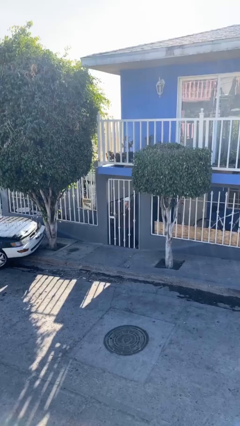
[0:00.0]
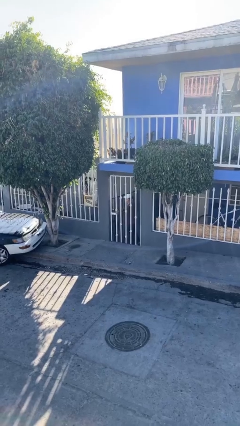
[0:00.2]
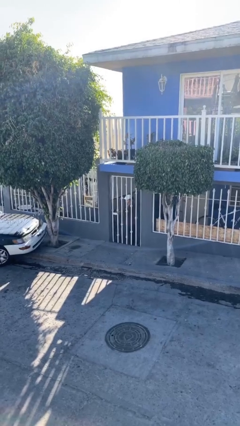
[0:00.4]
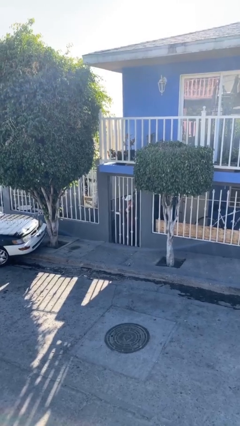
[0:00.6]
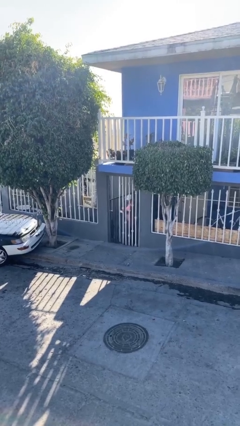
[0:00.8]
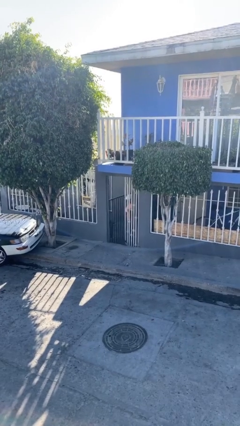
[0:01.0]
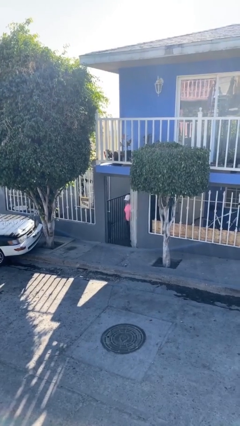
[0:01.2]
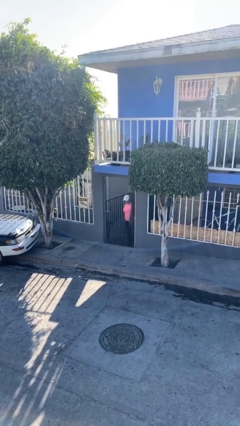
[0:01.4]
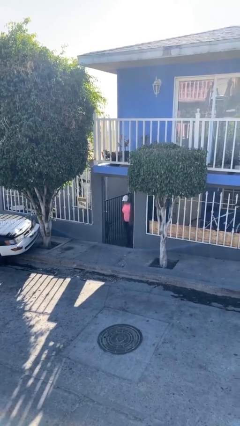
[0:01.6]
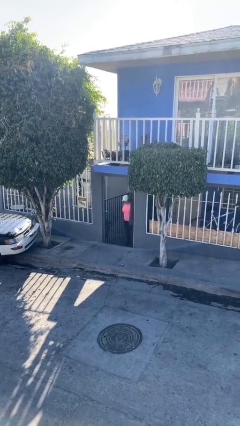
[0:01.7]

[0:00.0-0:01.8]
person opens facility door

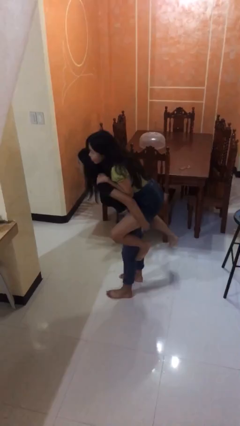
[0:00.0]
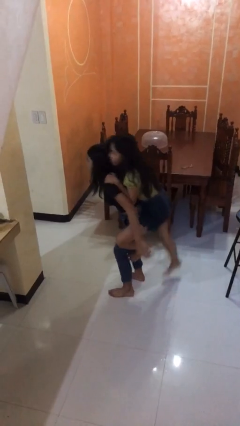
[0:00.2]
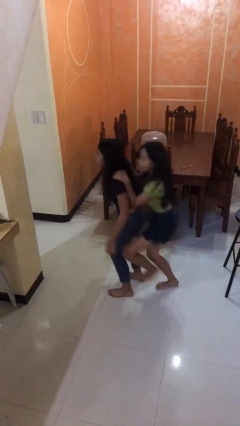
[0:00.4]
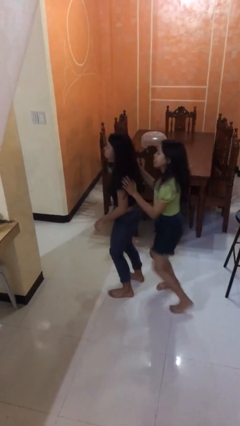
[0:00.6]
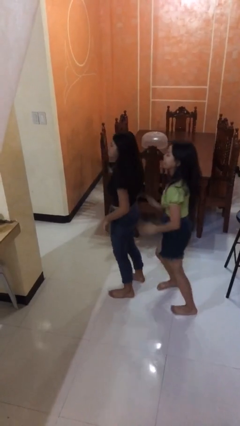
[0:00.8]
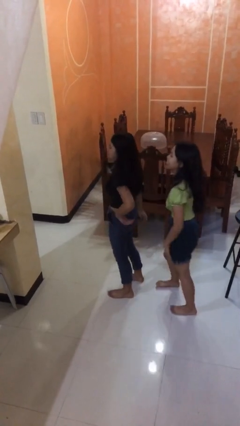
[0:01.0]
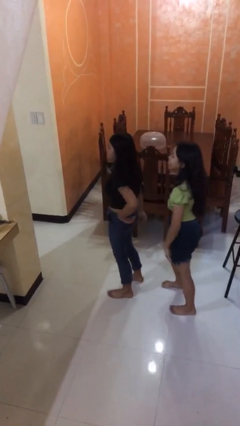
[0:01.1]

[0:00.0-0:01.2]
person puts down person

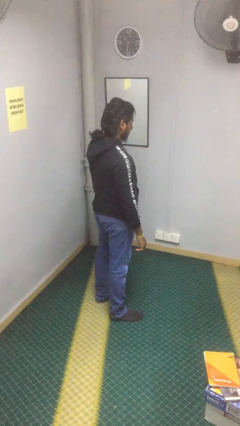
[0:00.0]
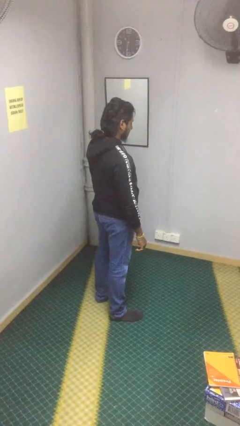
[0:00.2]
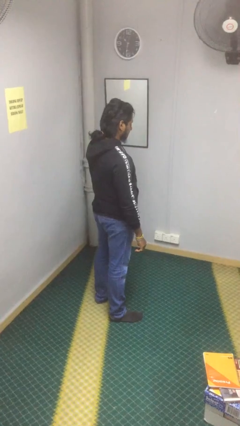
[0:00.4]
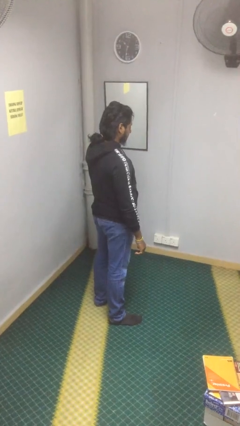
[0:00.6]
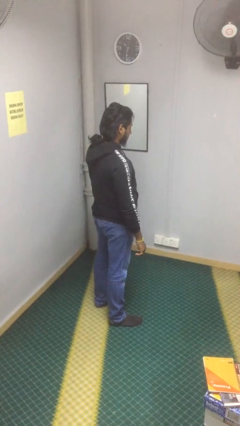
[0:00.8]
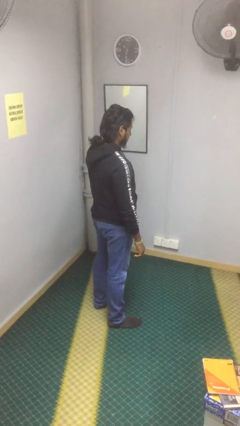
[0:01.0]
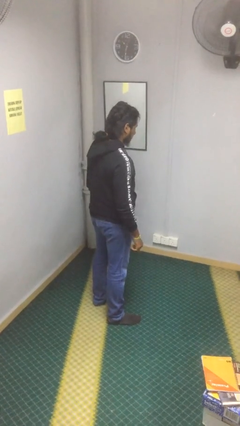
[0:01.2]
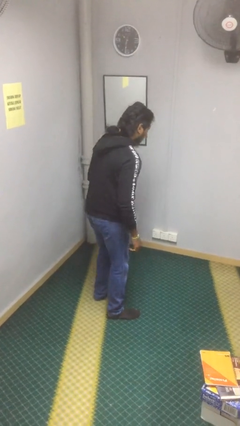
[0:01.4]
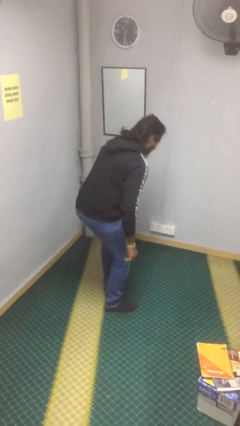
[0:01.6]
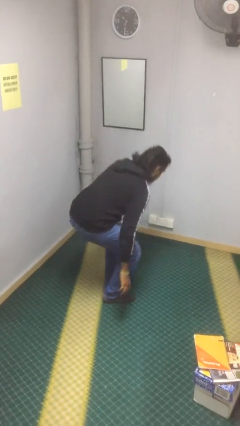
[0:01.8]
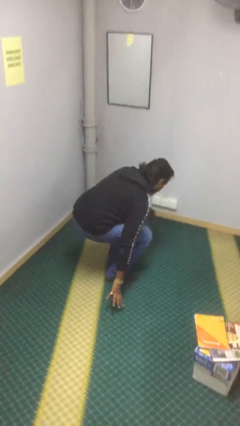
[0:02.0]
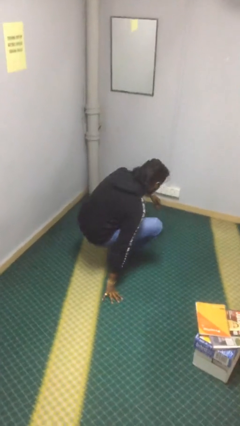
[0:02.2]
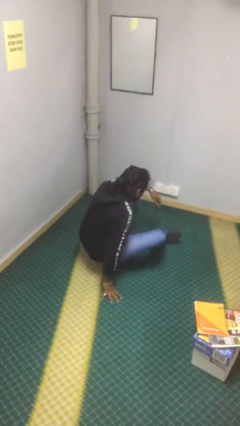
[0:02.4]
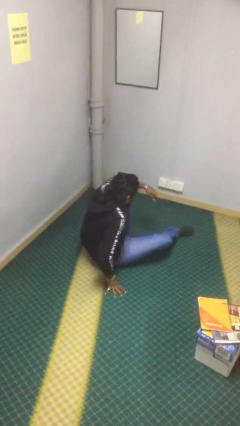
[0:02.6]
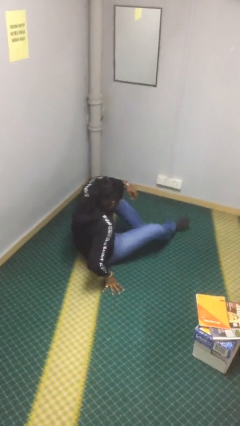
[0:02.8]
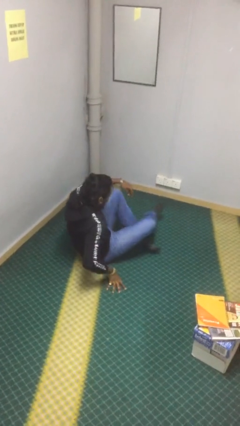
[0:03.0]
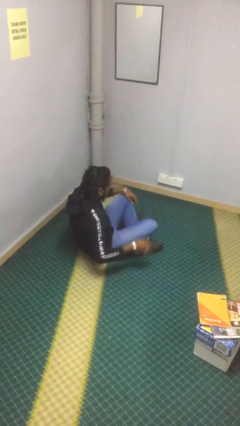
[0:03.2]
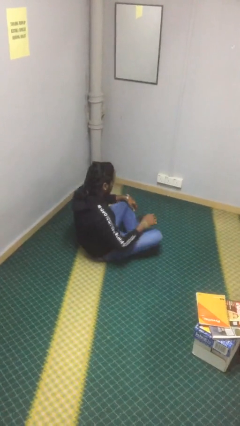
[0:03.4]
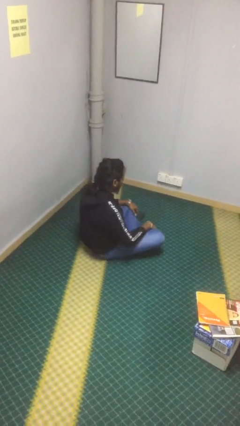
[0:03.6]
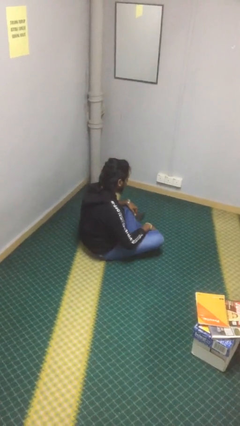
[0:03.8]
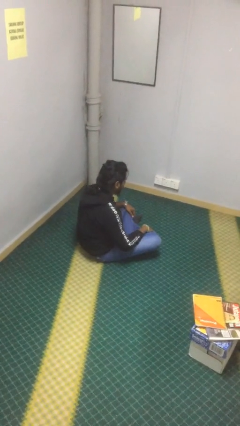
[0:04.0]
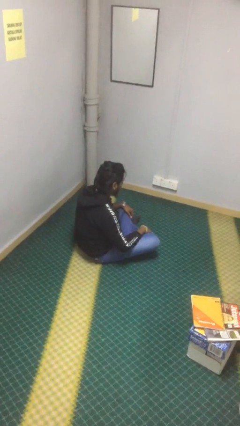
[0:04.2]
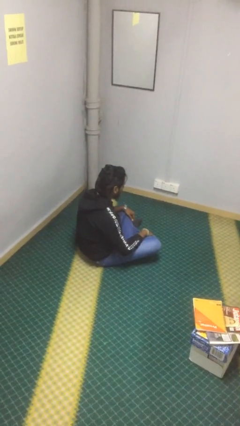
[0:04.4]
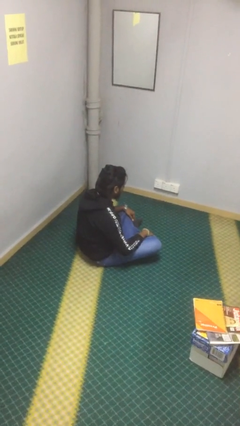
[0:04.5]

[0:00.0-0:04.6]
person sits crisscross

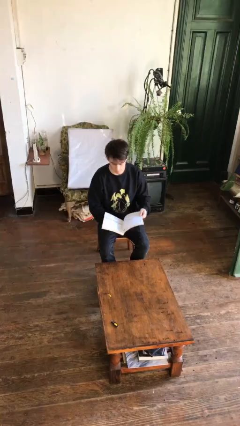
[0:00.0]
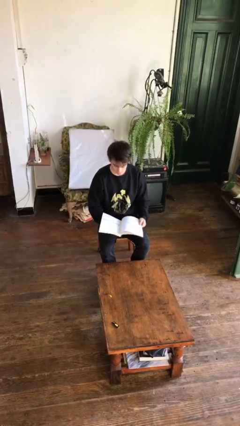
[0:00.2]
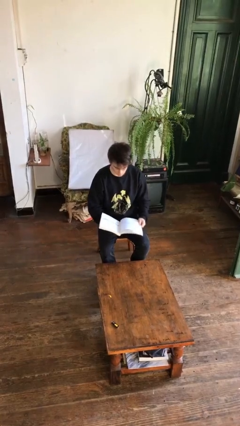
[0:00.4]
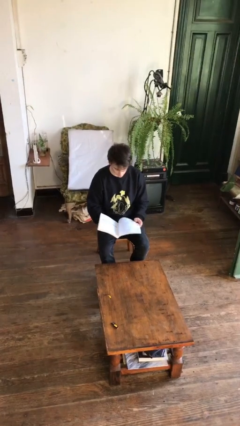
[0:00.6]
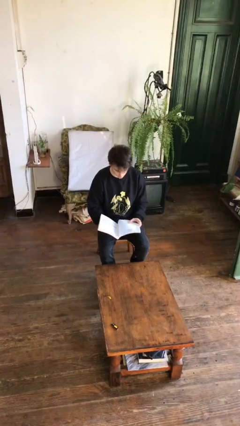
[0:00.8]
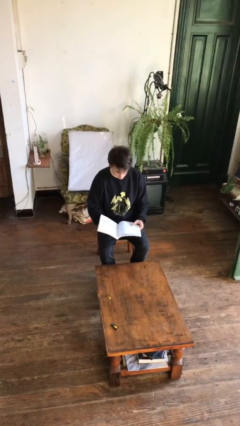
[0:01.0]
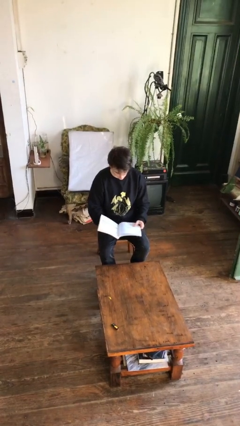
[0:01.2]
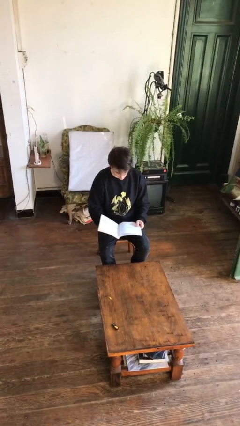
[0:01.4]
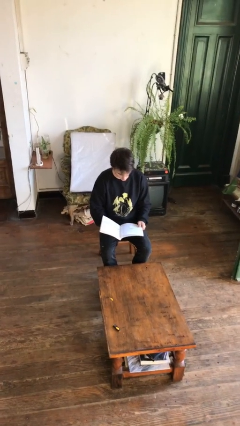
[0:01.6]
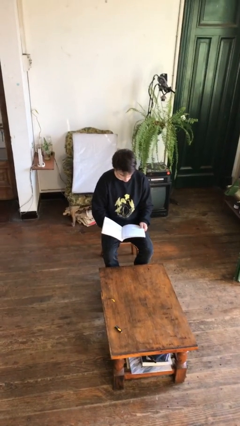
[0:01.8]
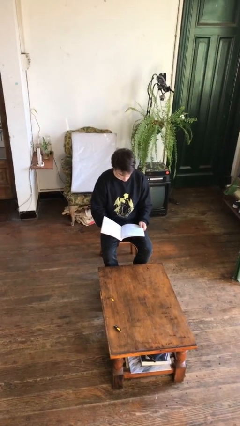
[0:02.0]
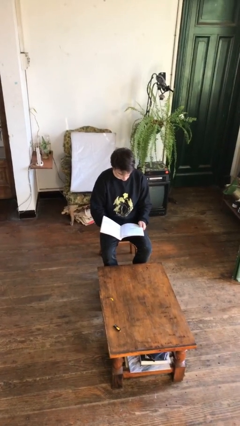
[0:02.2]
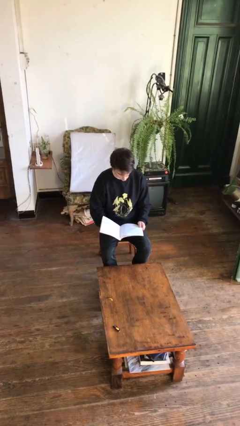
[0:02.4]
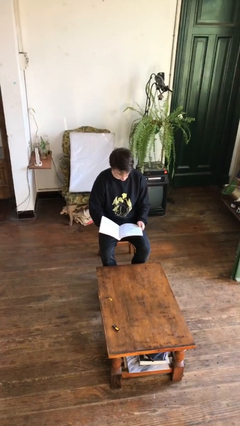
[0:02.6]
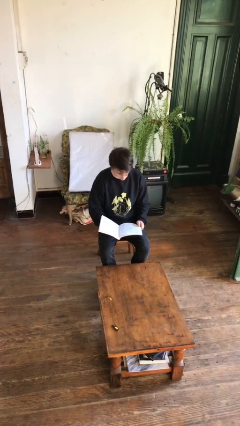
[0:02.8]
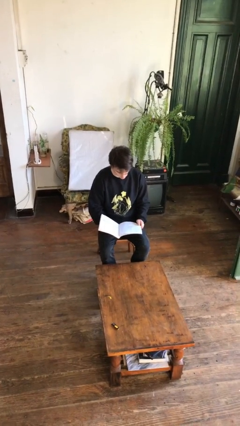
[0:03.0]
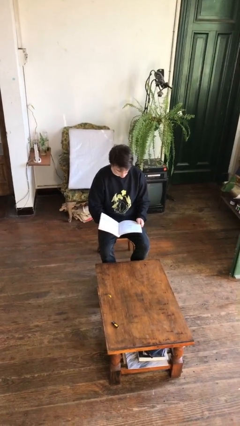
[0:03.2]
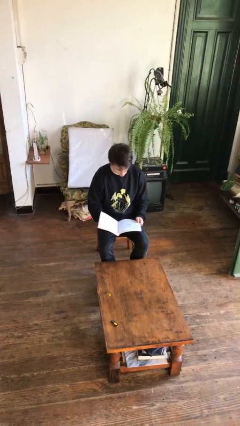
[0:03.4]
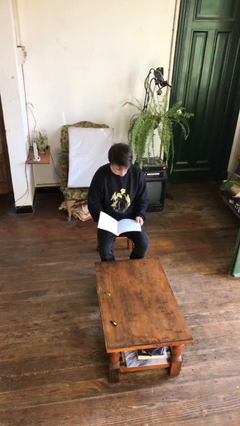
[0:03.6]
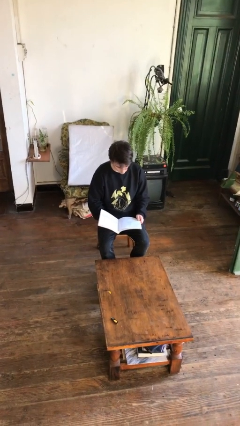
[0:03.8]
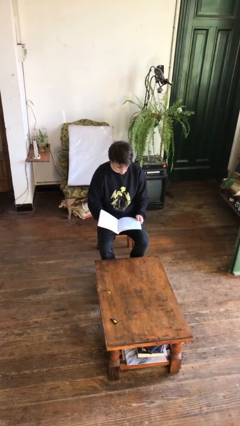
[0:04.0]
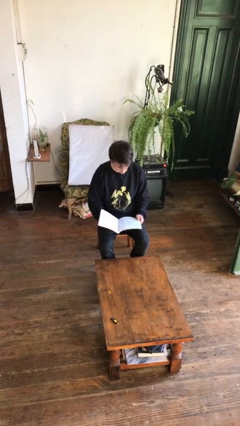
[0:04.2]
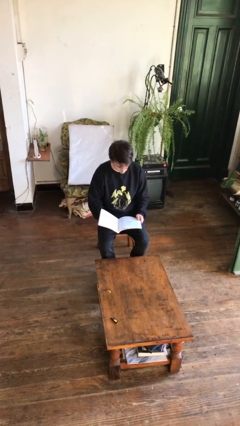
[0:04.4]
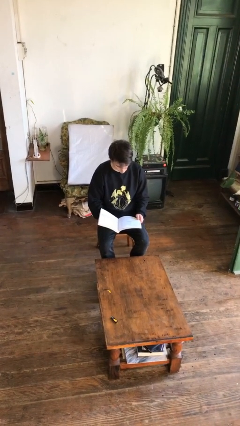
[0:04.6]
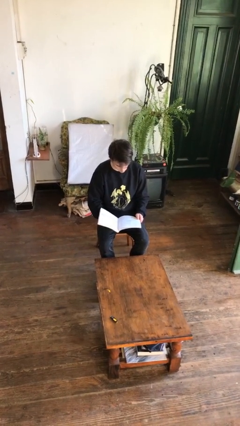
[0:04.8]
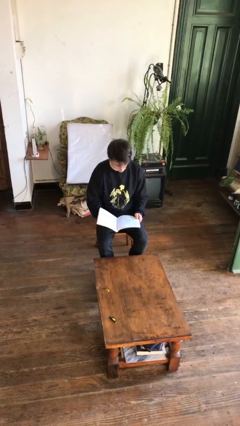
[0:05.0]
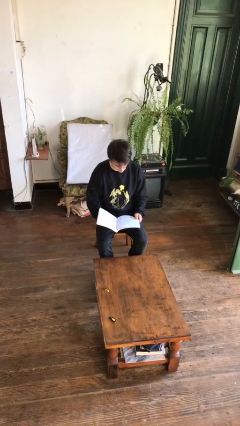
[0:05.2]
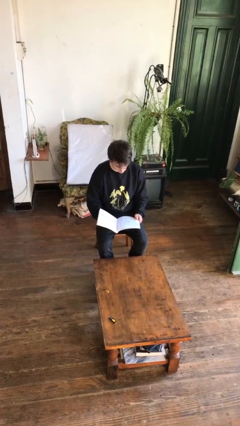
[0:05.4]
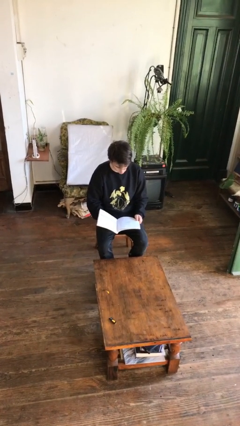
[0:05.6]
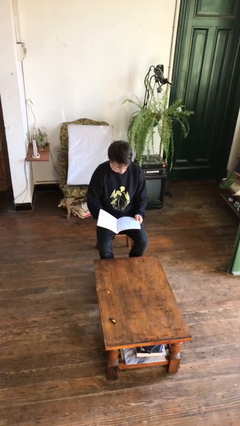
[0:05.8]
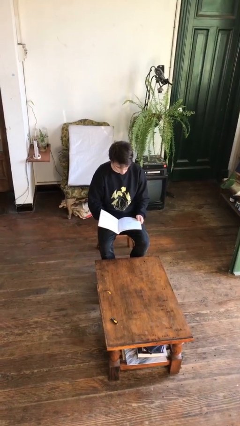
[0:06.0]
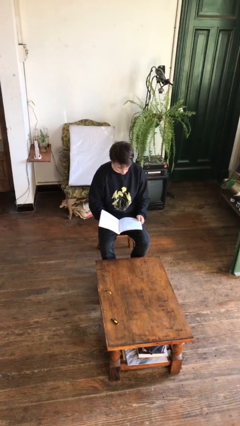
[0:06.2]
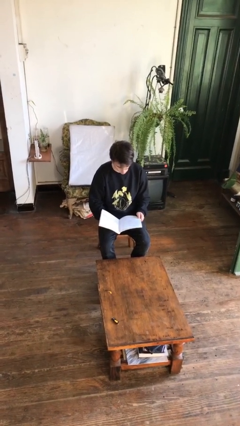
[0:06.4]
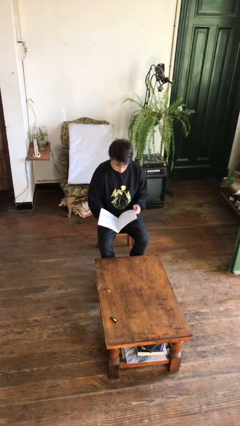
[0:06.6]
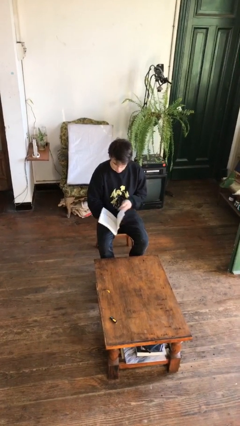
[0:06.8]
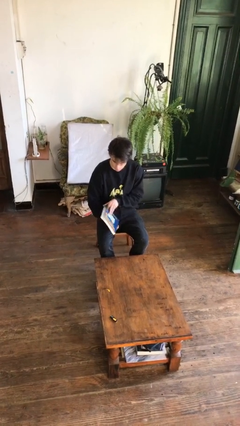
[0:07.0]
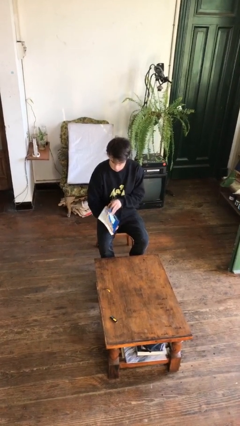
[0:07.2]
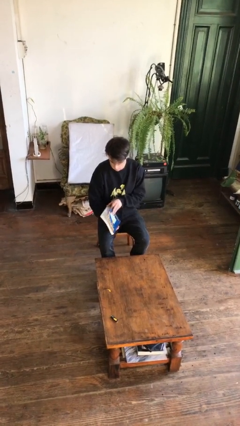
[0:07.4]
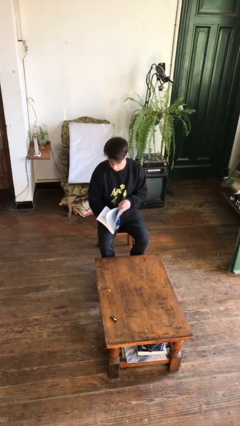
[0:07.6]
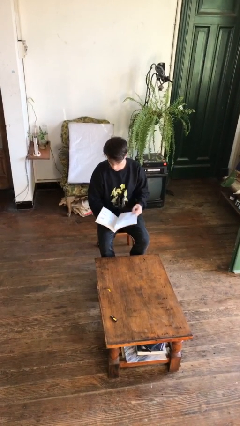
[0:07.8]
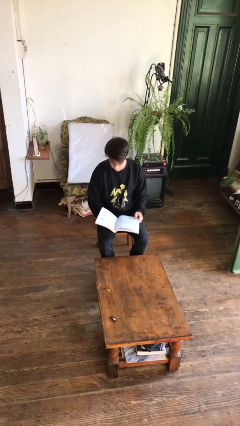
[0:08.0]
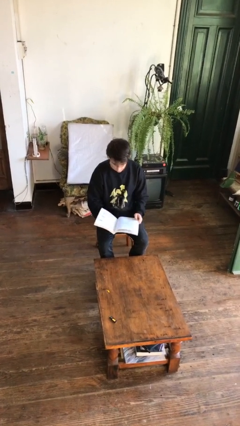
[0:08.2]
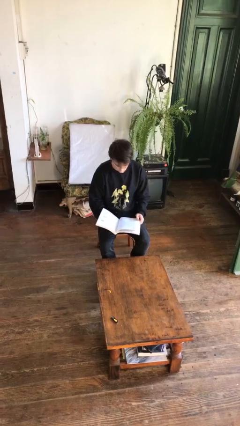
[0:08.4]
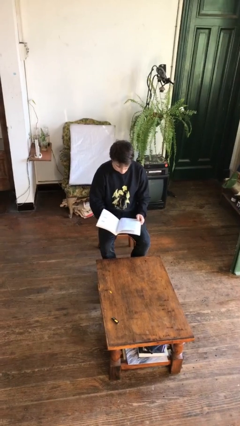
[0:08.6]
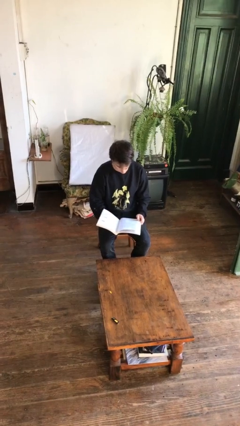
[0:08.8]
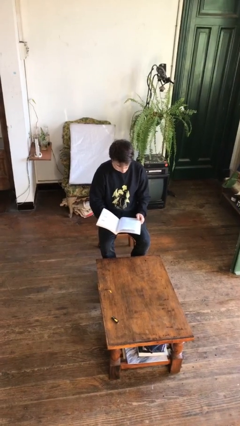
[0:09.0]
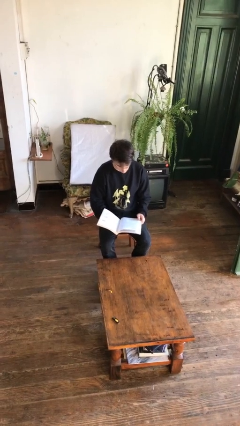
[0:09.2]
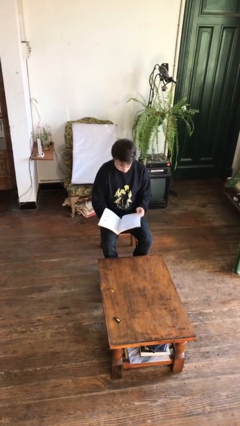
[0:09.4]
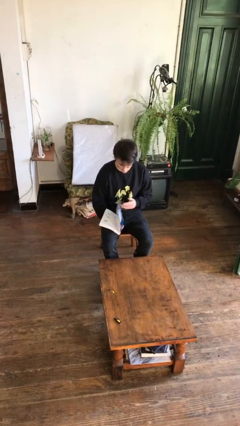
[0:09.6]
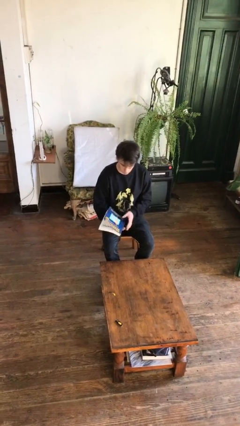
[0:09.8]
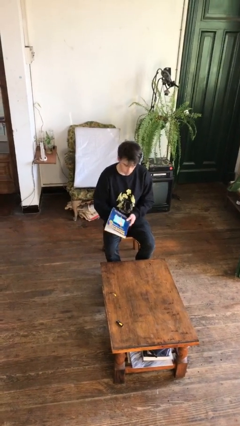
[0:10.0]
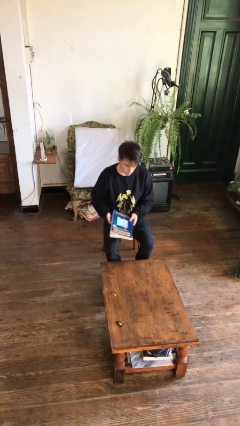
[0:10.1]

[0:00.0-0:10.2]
person reads document
